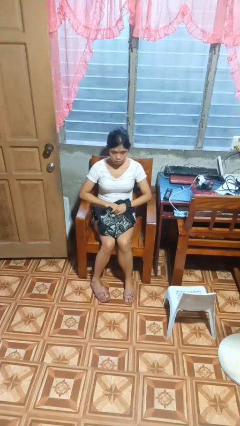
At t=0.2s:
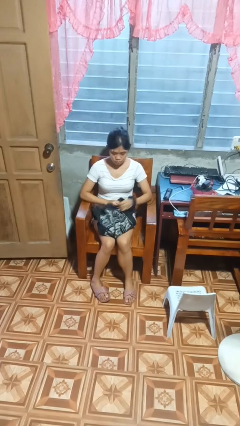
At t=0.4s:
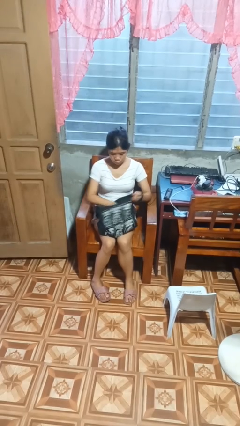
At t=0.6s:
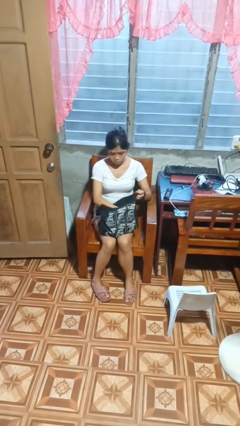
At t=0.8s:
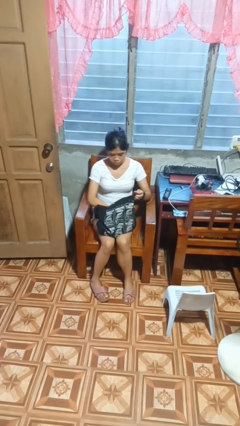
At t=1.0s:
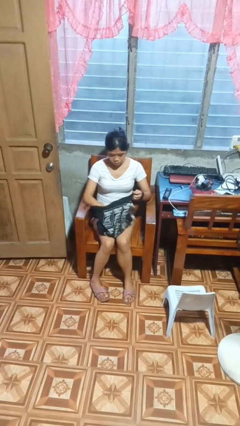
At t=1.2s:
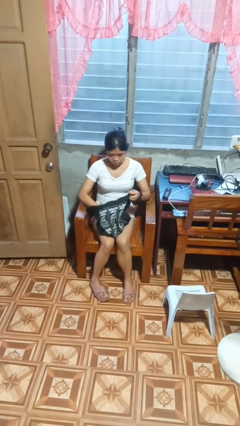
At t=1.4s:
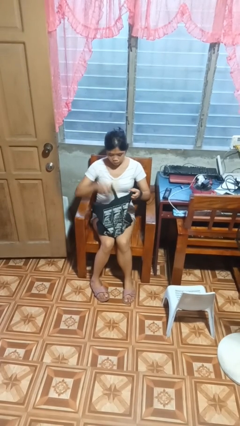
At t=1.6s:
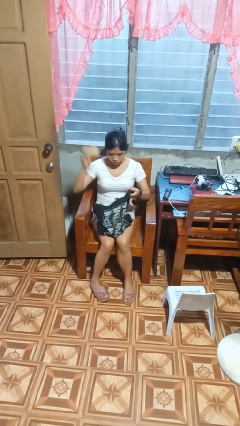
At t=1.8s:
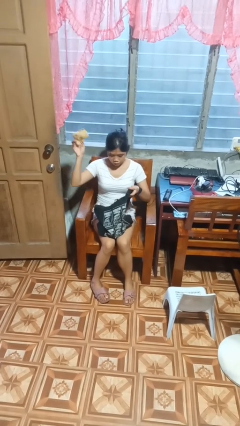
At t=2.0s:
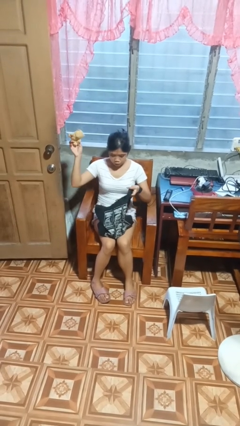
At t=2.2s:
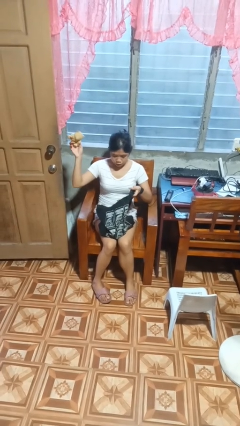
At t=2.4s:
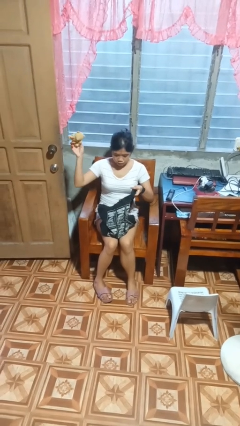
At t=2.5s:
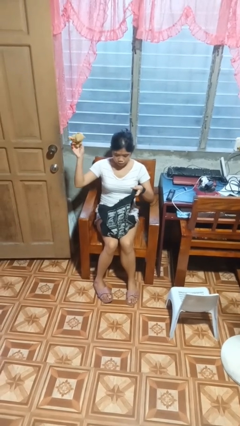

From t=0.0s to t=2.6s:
person searches in bag

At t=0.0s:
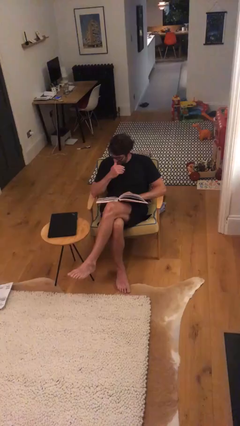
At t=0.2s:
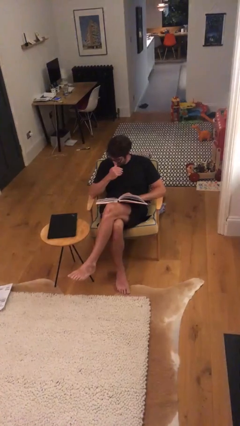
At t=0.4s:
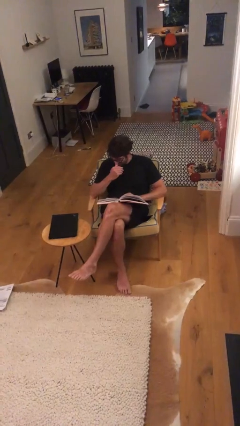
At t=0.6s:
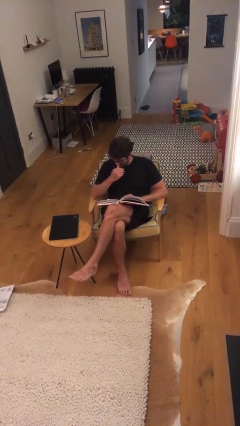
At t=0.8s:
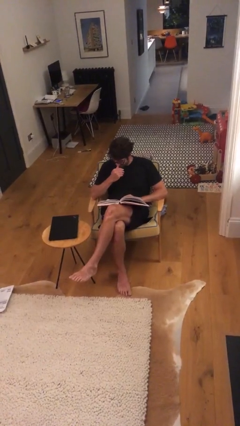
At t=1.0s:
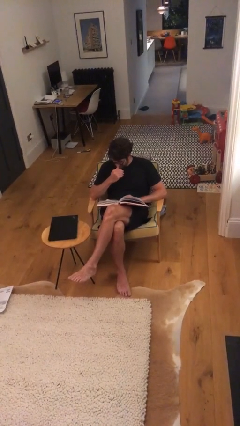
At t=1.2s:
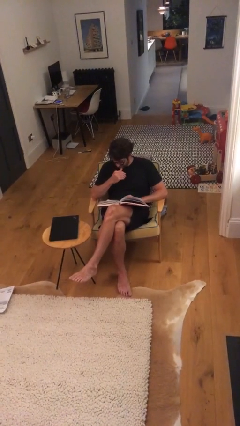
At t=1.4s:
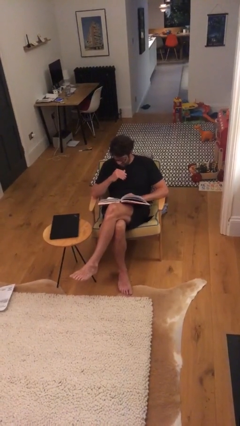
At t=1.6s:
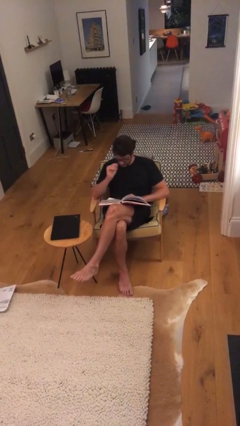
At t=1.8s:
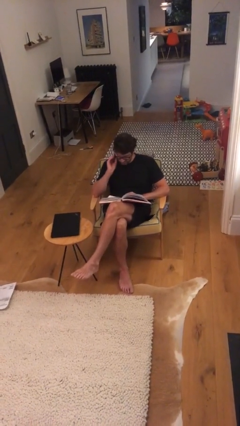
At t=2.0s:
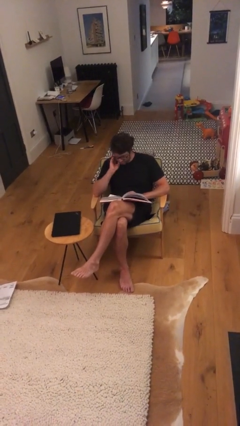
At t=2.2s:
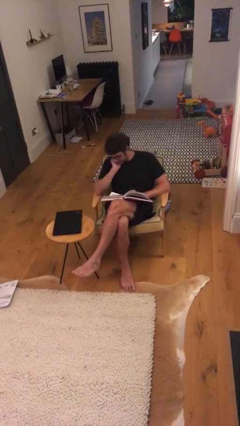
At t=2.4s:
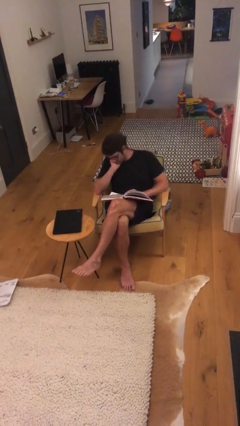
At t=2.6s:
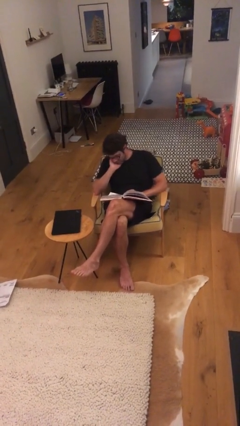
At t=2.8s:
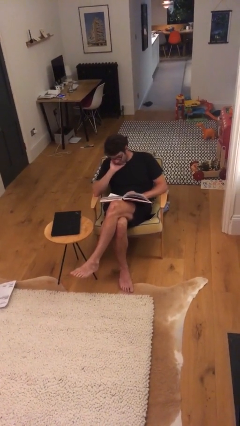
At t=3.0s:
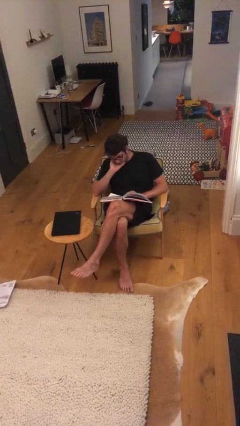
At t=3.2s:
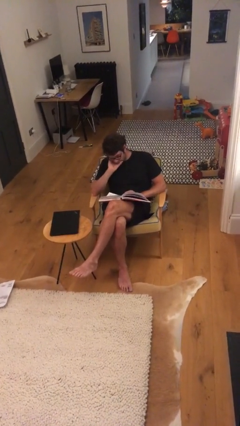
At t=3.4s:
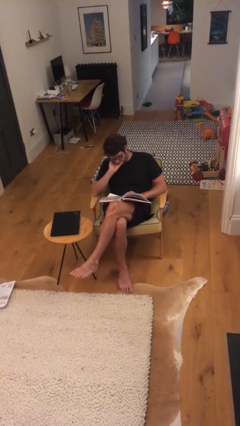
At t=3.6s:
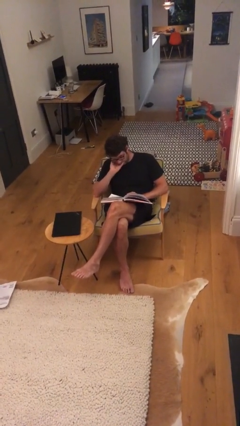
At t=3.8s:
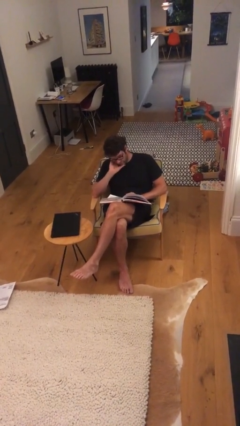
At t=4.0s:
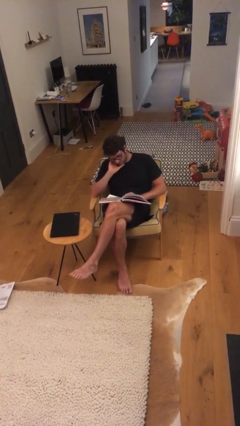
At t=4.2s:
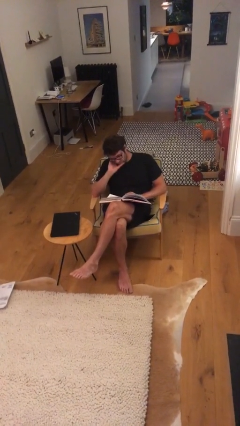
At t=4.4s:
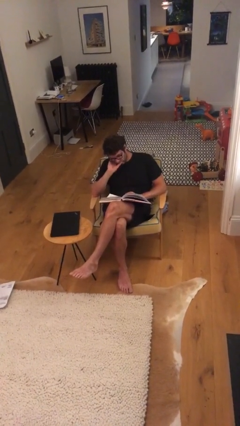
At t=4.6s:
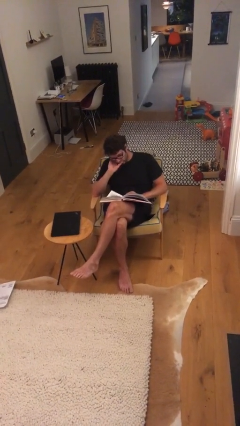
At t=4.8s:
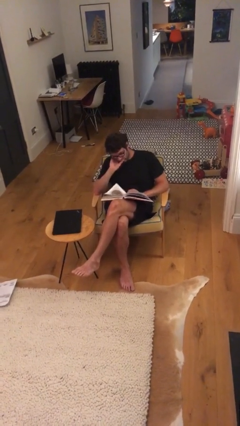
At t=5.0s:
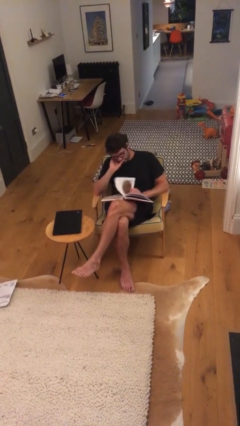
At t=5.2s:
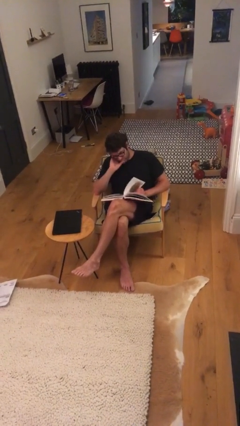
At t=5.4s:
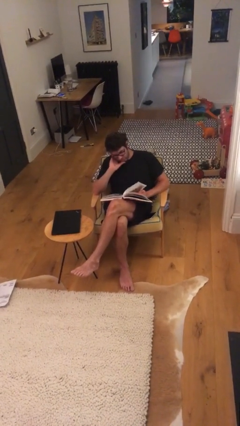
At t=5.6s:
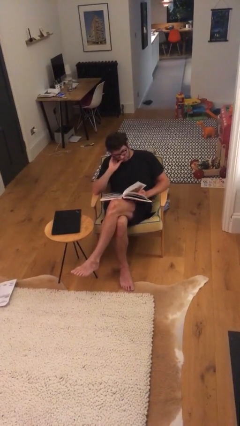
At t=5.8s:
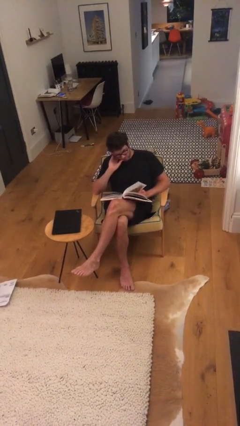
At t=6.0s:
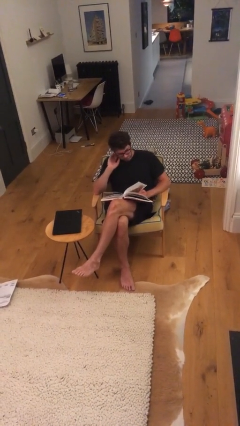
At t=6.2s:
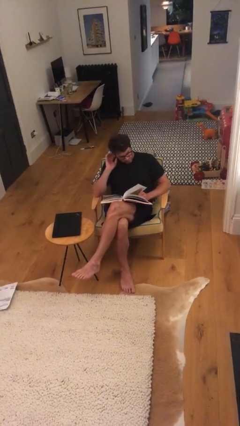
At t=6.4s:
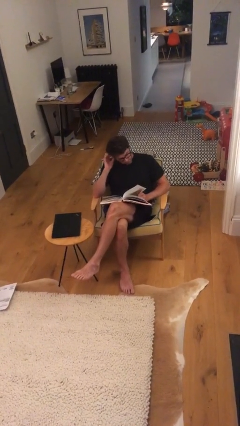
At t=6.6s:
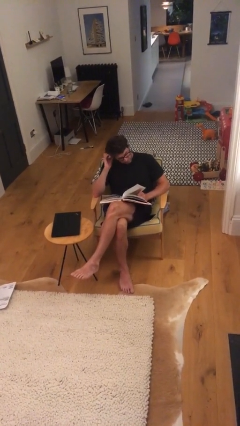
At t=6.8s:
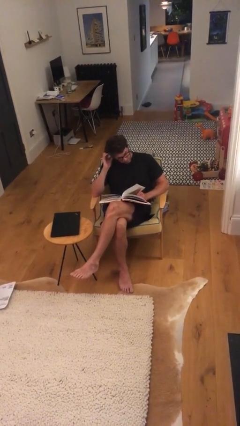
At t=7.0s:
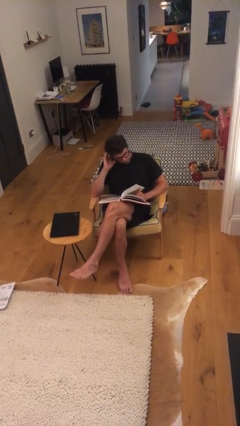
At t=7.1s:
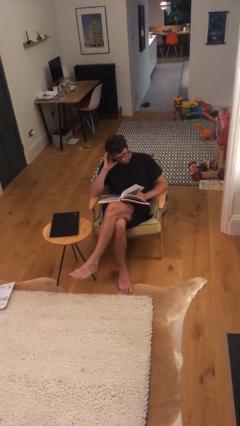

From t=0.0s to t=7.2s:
person reads document

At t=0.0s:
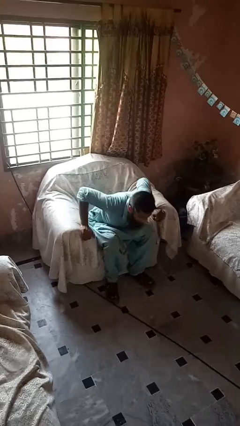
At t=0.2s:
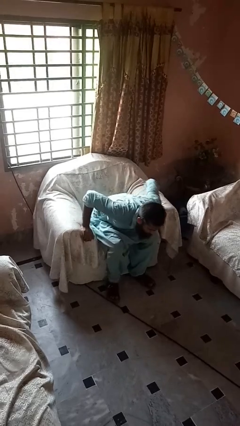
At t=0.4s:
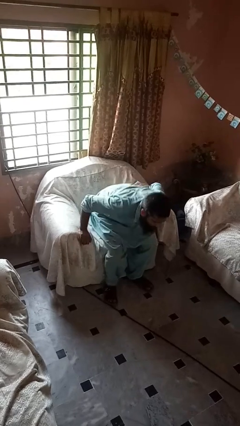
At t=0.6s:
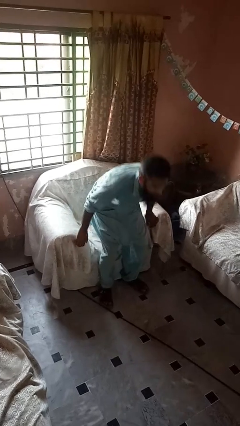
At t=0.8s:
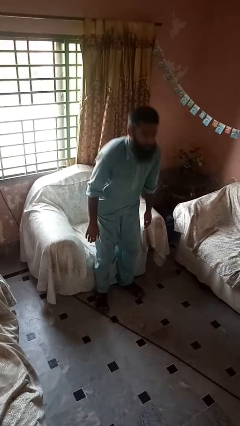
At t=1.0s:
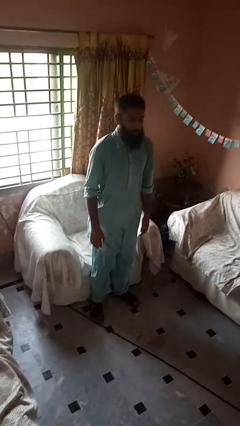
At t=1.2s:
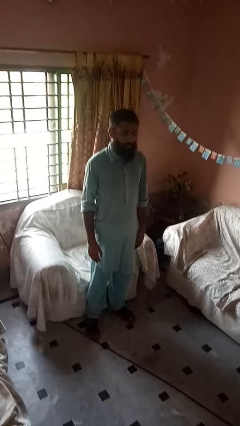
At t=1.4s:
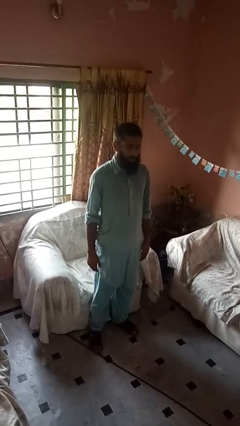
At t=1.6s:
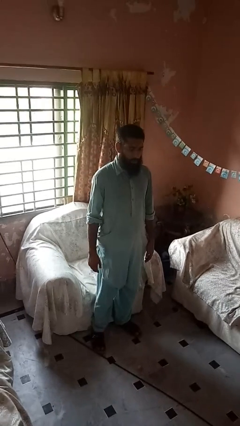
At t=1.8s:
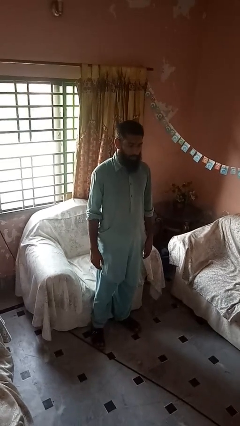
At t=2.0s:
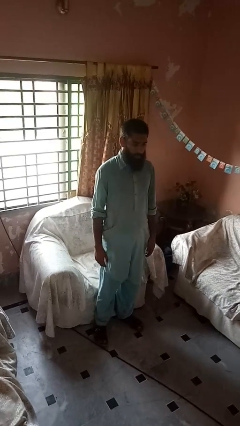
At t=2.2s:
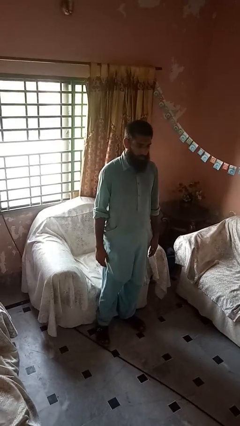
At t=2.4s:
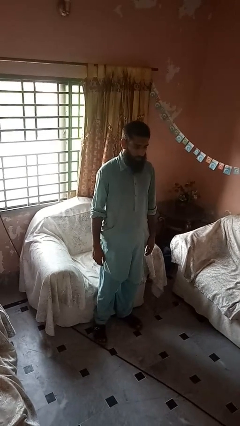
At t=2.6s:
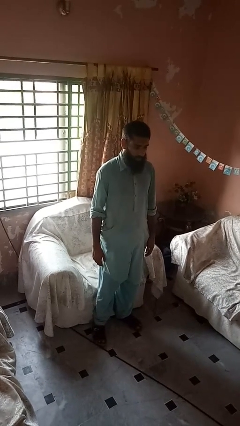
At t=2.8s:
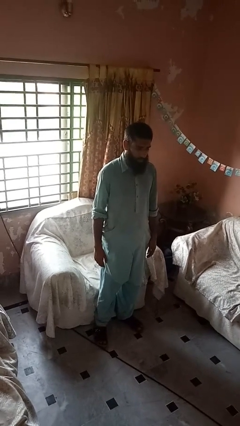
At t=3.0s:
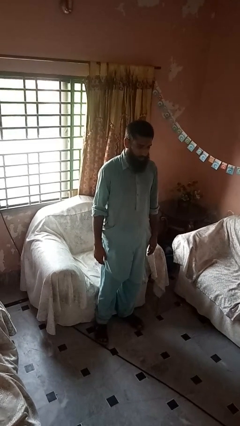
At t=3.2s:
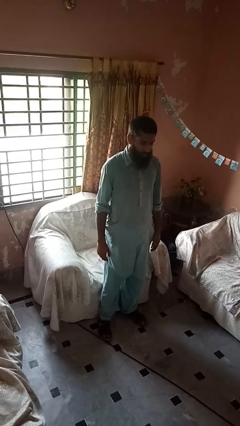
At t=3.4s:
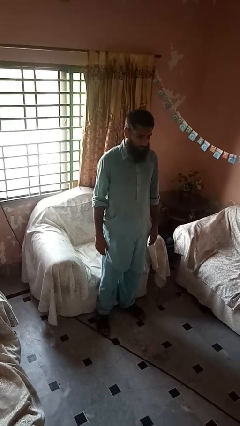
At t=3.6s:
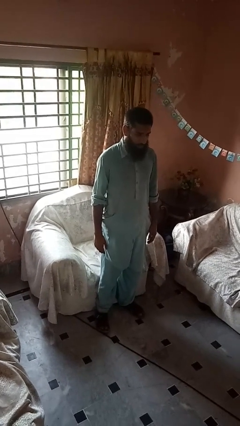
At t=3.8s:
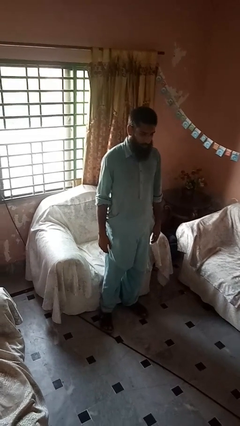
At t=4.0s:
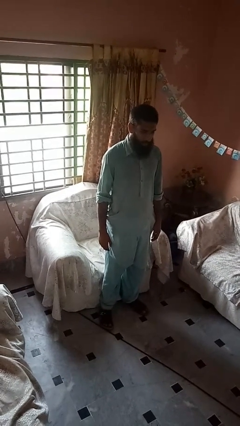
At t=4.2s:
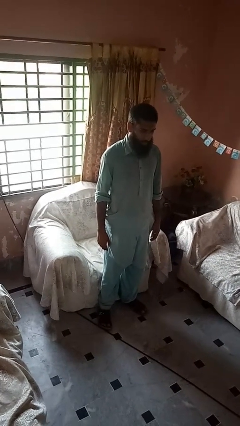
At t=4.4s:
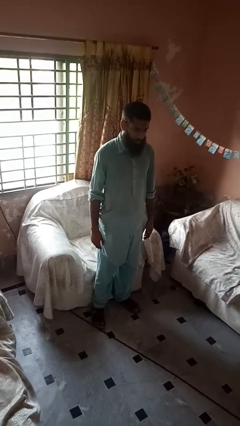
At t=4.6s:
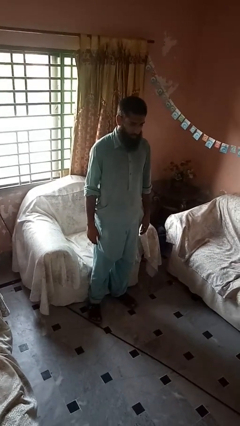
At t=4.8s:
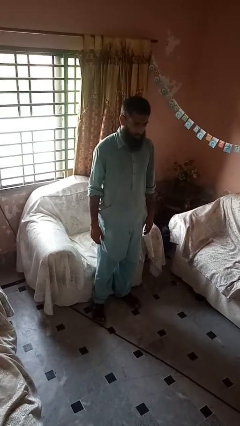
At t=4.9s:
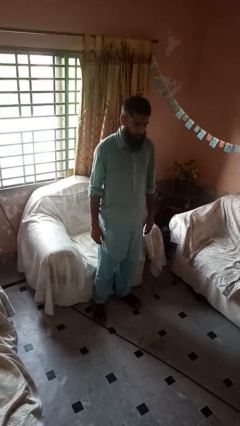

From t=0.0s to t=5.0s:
person stands up from floor

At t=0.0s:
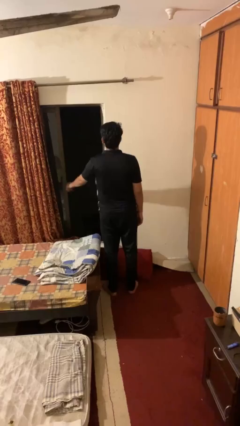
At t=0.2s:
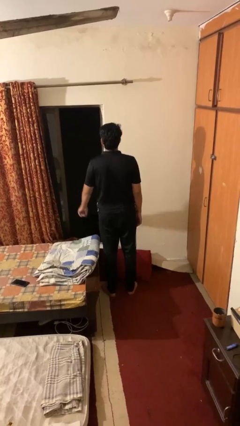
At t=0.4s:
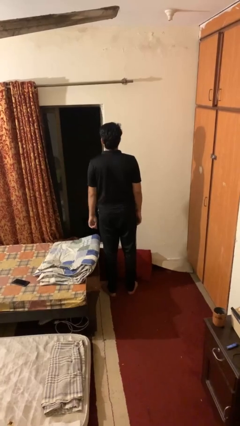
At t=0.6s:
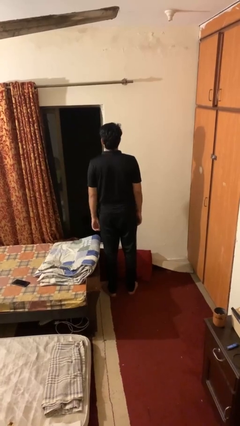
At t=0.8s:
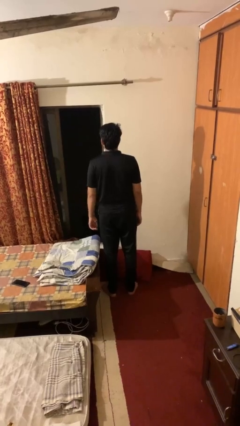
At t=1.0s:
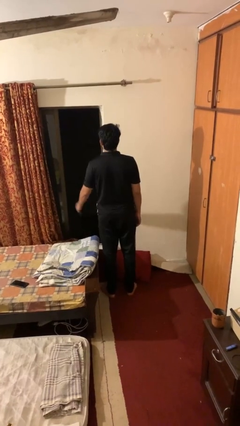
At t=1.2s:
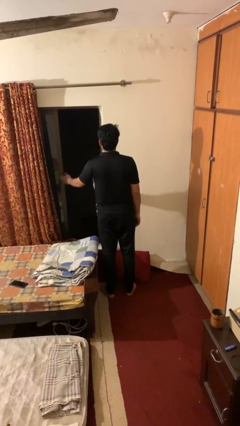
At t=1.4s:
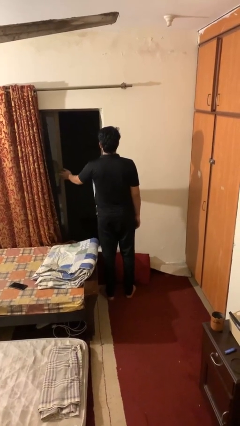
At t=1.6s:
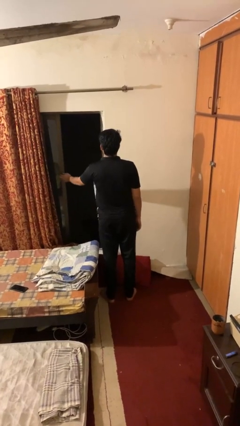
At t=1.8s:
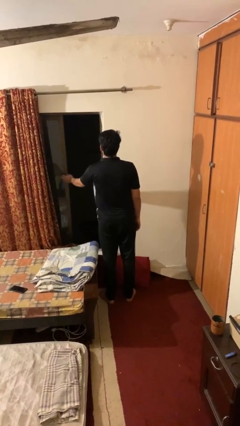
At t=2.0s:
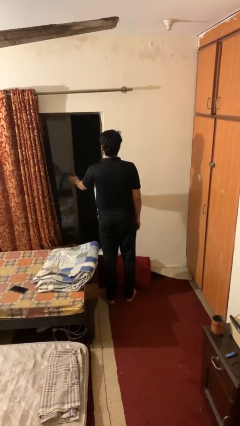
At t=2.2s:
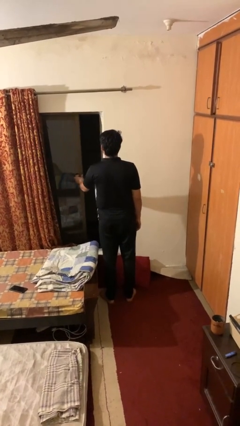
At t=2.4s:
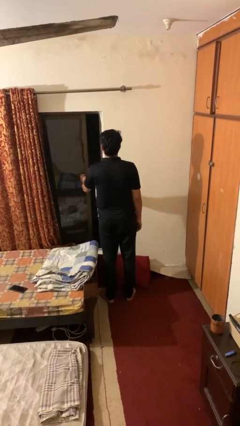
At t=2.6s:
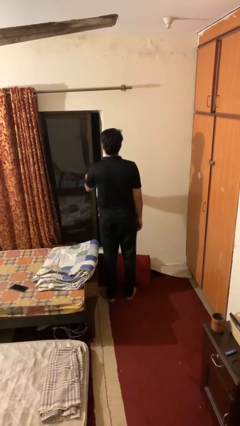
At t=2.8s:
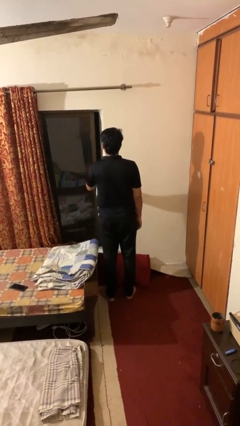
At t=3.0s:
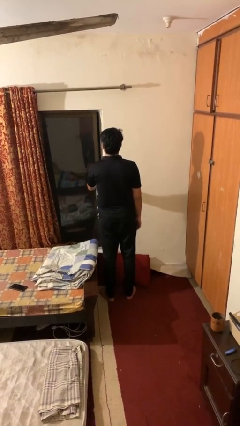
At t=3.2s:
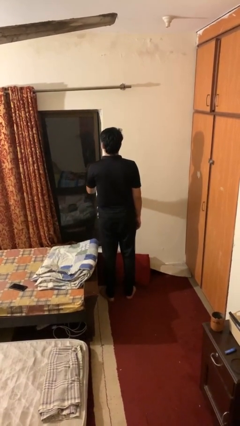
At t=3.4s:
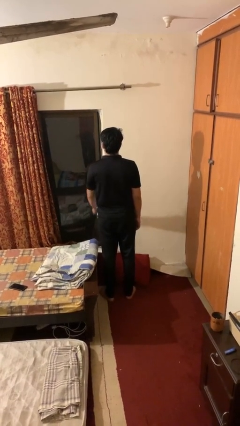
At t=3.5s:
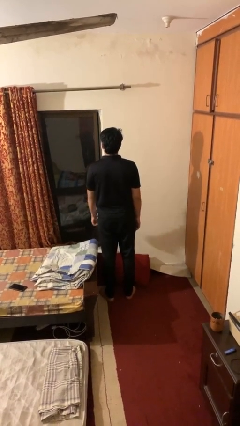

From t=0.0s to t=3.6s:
person closes home window
